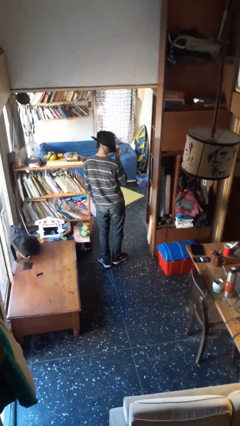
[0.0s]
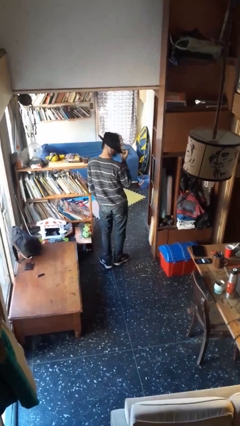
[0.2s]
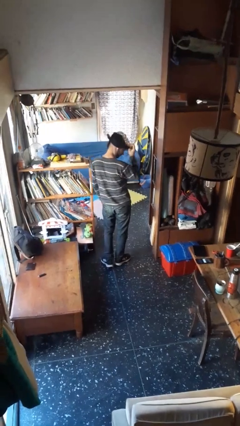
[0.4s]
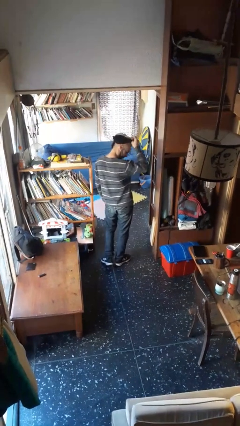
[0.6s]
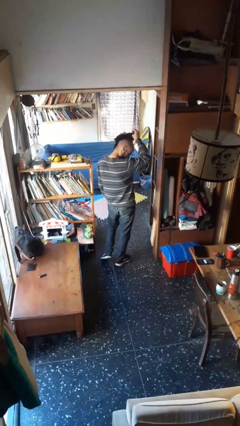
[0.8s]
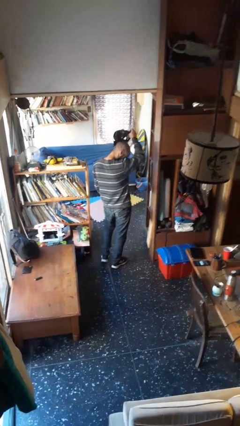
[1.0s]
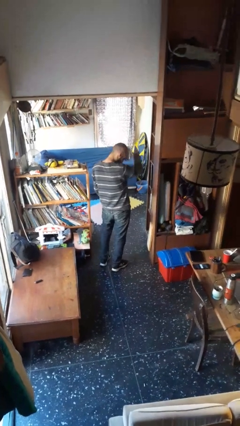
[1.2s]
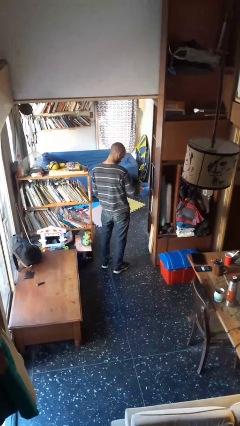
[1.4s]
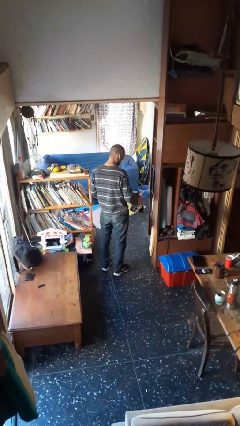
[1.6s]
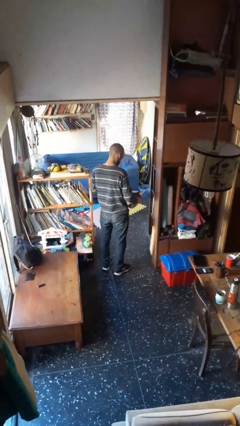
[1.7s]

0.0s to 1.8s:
person takes off facemask

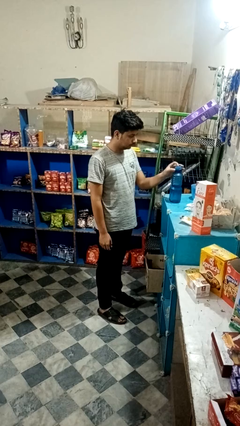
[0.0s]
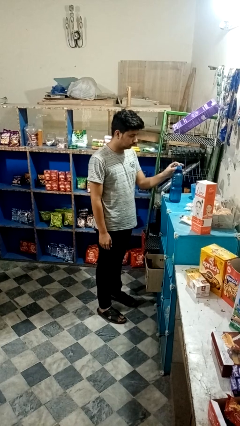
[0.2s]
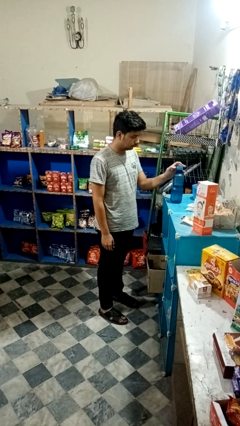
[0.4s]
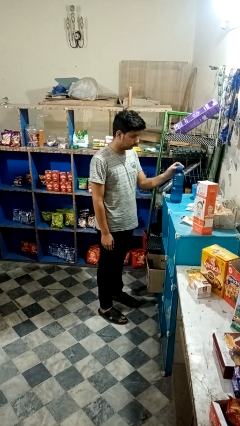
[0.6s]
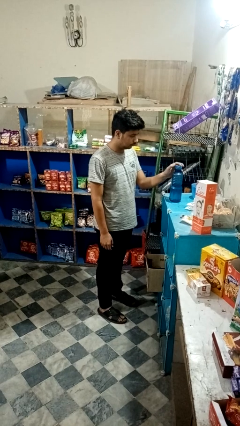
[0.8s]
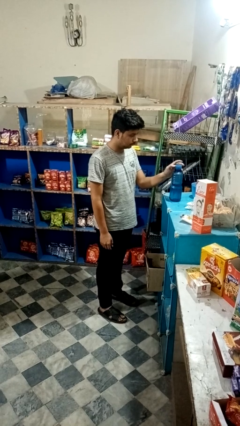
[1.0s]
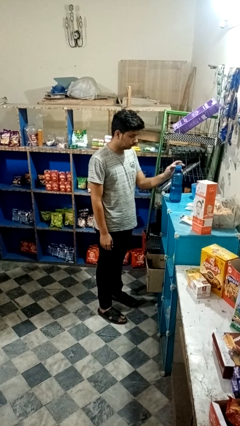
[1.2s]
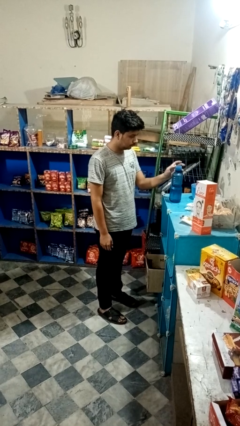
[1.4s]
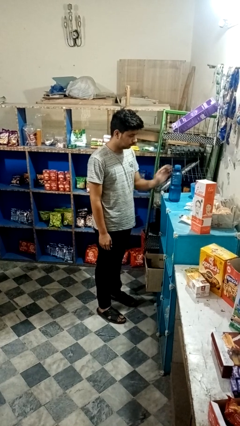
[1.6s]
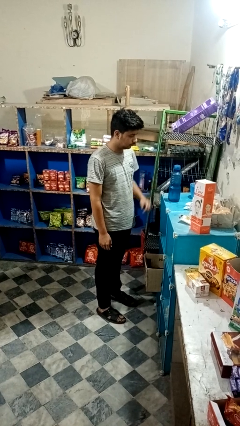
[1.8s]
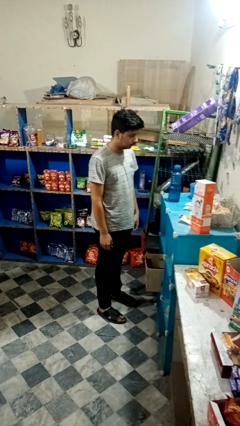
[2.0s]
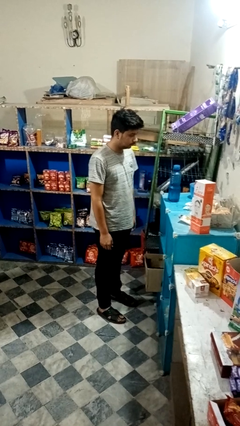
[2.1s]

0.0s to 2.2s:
person screws lid to bottle

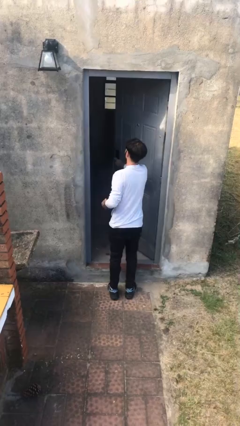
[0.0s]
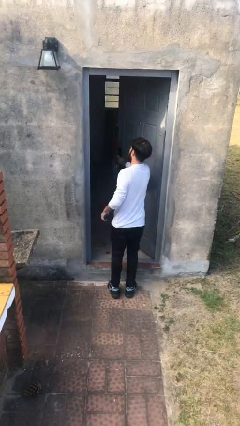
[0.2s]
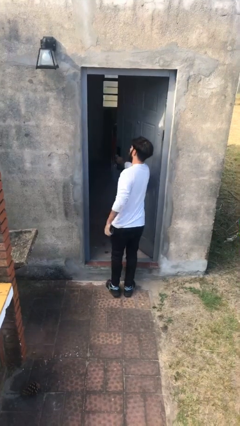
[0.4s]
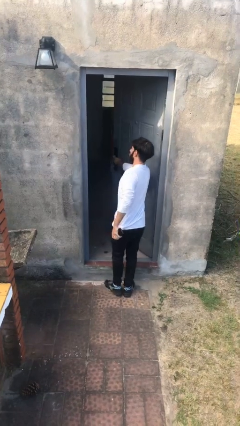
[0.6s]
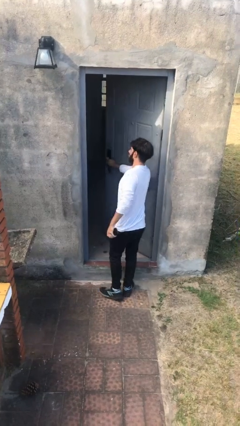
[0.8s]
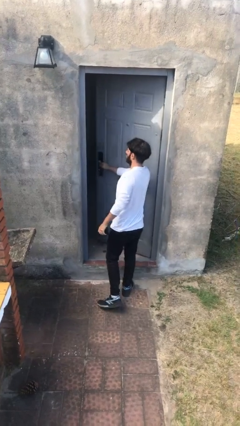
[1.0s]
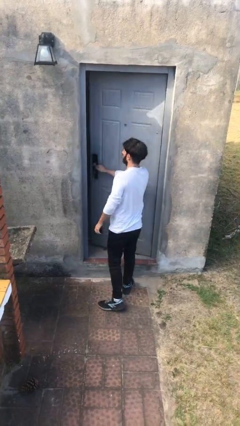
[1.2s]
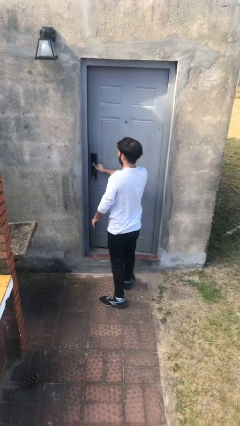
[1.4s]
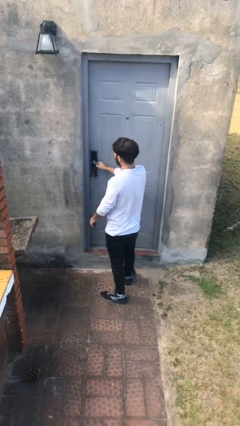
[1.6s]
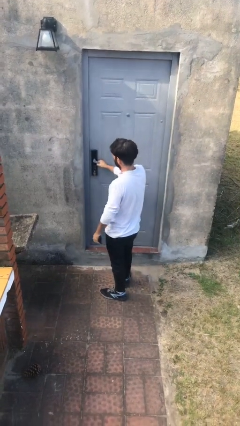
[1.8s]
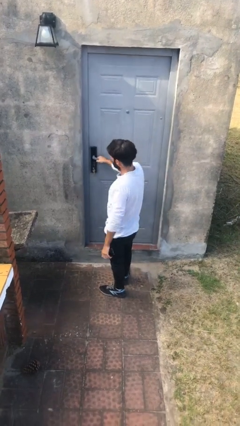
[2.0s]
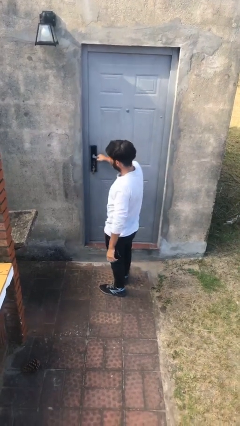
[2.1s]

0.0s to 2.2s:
person closes facility door

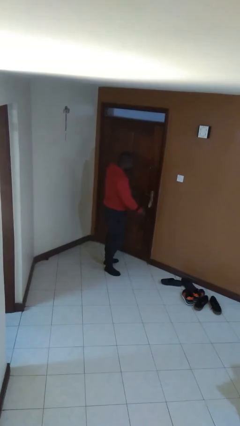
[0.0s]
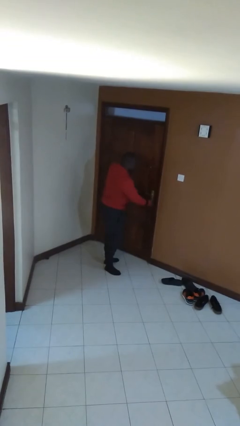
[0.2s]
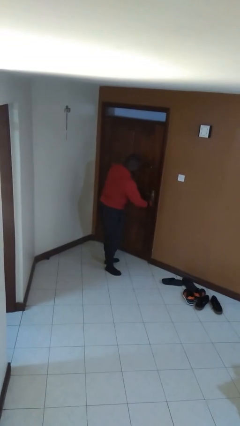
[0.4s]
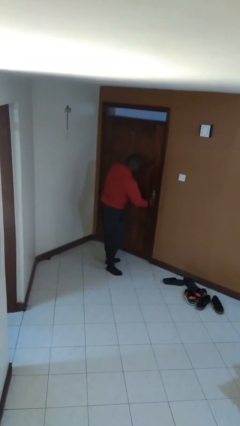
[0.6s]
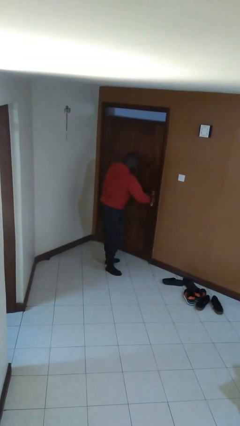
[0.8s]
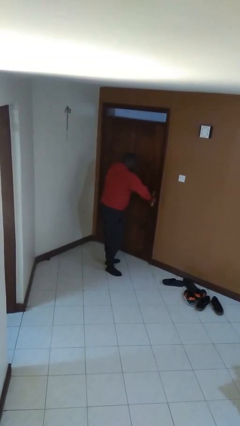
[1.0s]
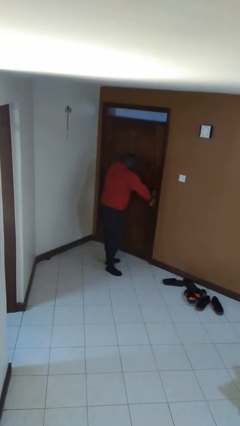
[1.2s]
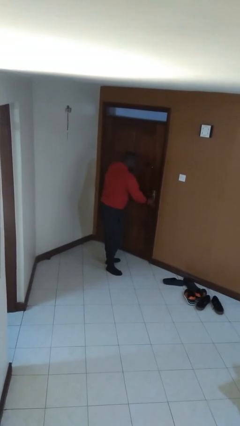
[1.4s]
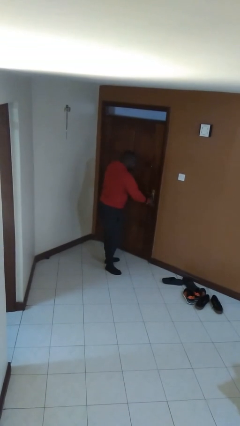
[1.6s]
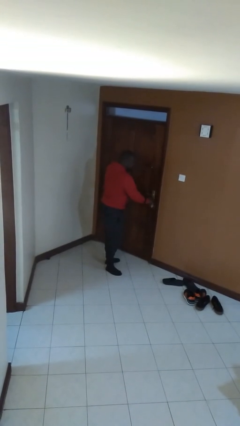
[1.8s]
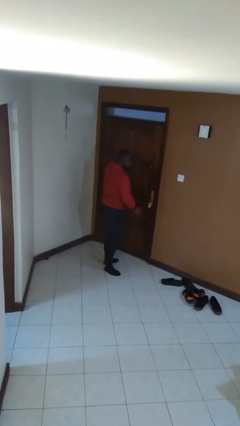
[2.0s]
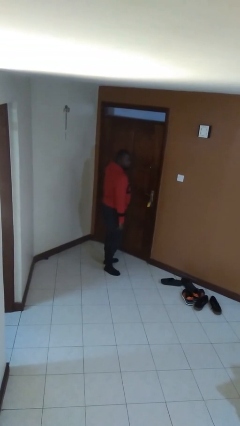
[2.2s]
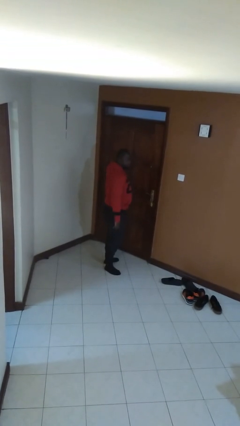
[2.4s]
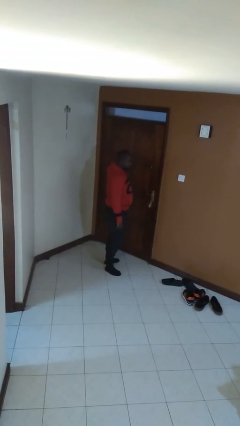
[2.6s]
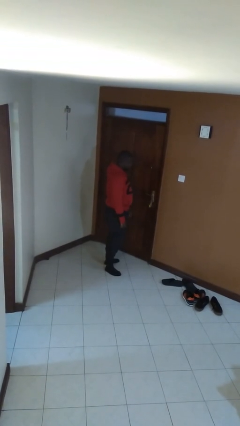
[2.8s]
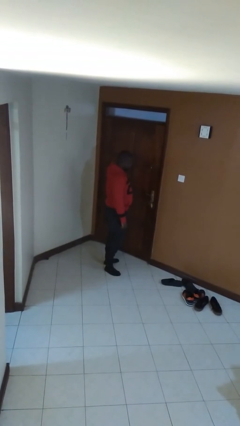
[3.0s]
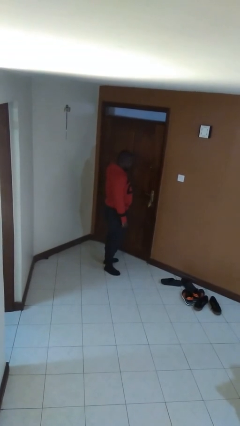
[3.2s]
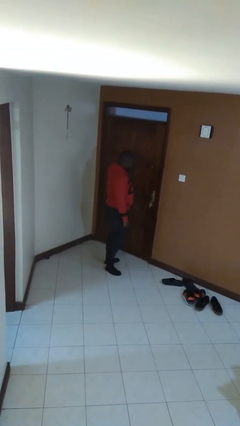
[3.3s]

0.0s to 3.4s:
person unlocks door with keys

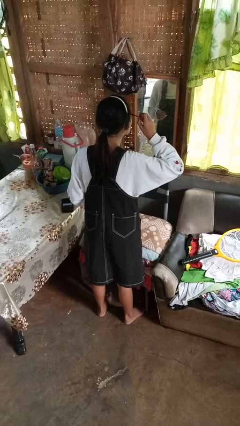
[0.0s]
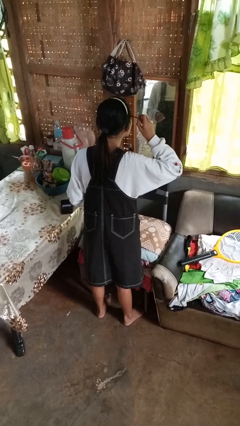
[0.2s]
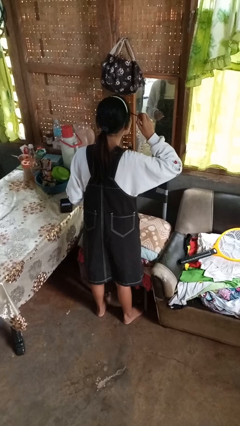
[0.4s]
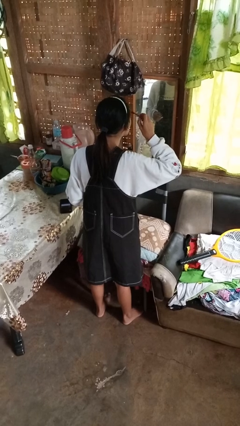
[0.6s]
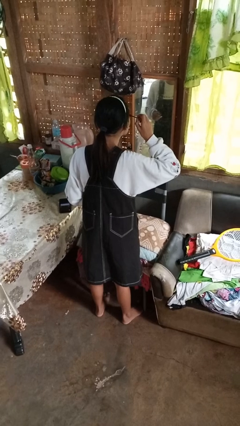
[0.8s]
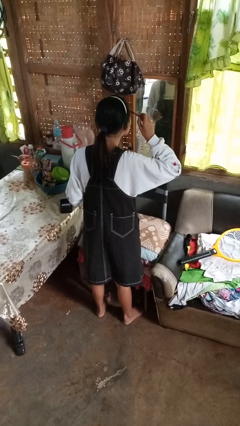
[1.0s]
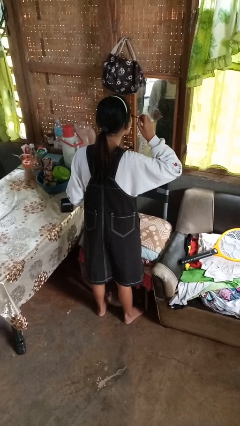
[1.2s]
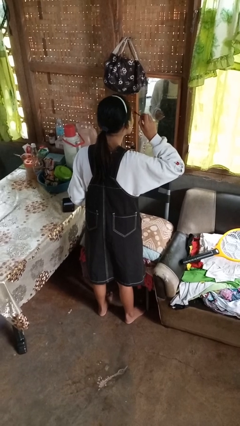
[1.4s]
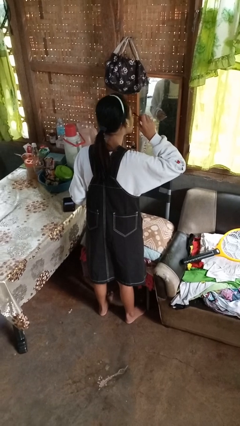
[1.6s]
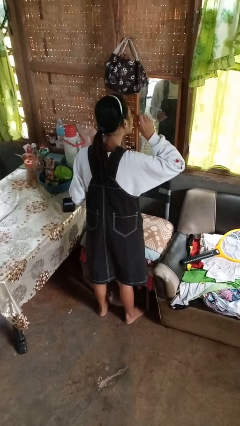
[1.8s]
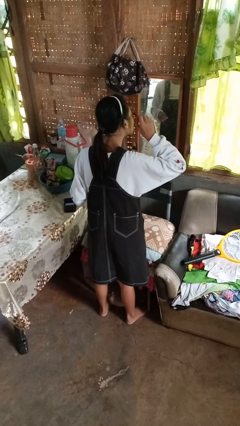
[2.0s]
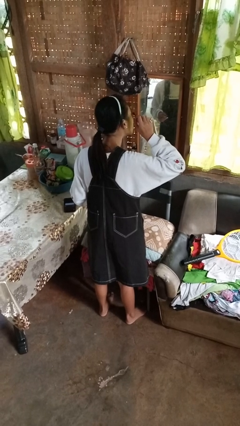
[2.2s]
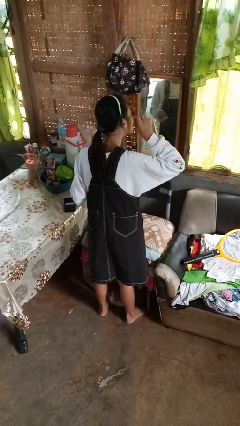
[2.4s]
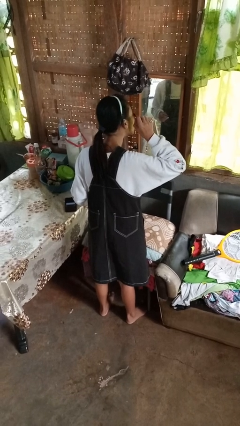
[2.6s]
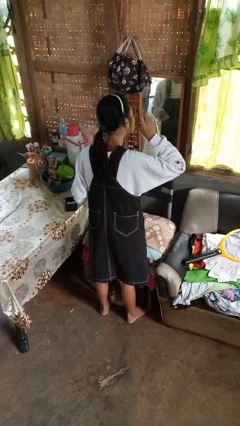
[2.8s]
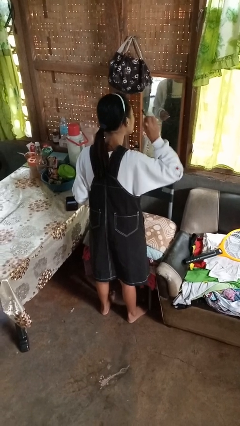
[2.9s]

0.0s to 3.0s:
person applies eye makeup

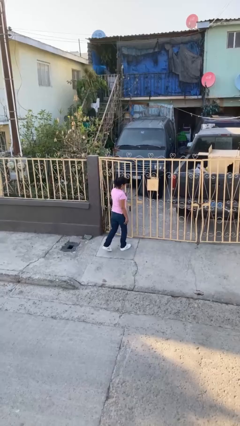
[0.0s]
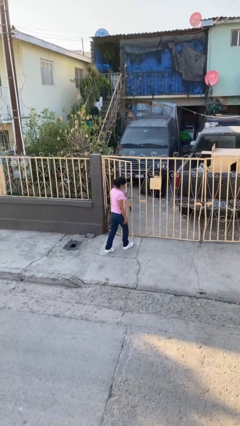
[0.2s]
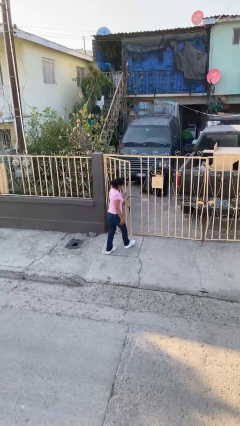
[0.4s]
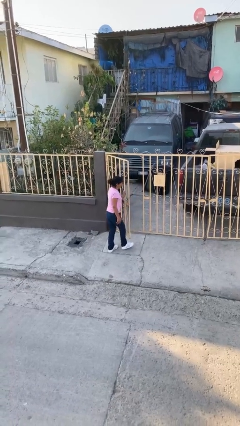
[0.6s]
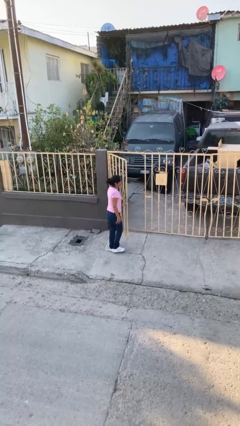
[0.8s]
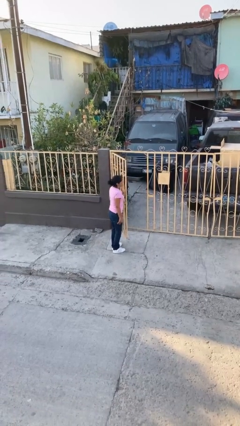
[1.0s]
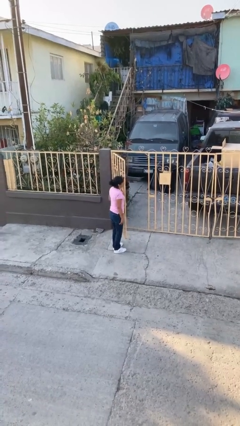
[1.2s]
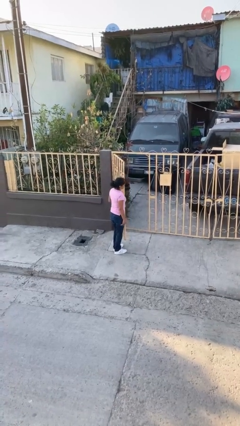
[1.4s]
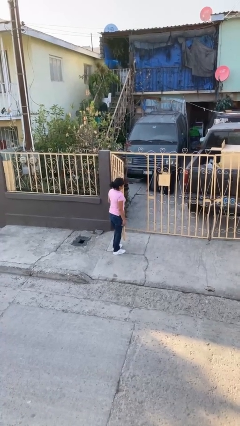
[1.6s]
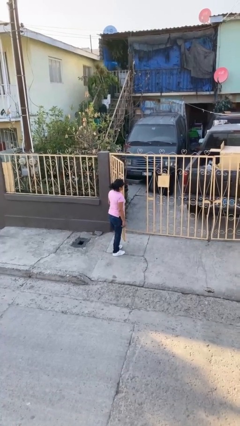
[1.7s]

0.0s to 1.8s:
person opens facility door

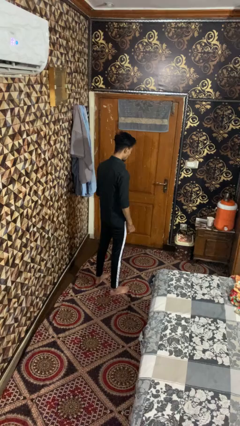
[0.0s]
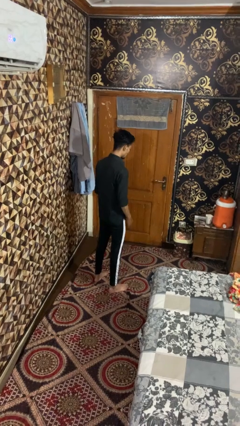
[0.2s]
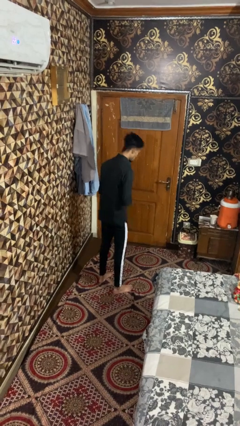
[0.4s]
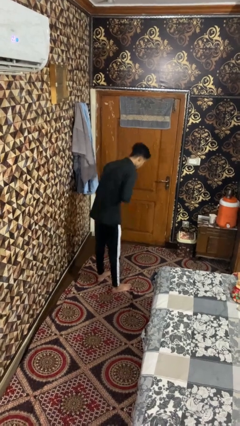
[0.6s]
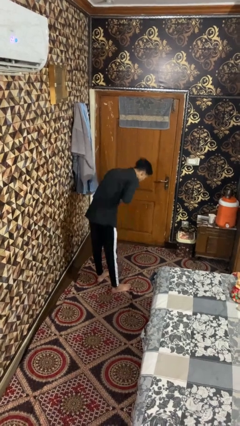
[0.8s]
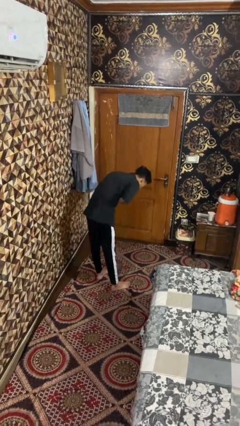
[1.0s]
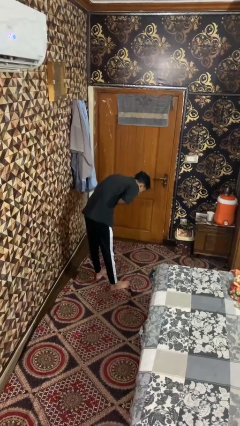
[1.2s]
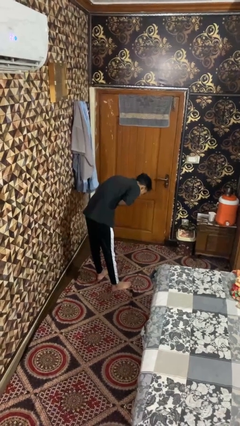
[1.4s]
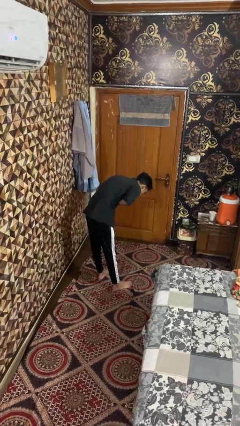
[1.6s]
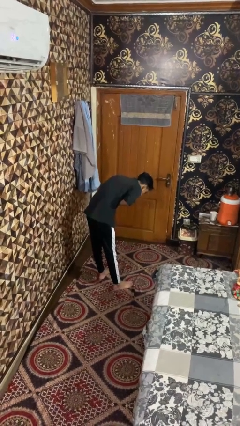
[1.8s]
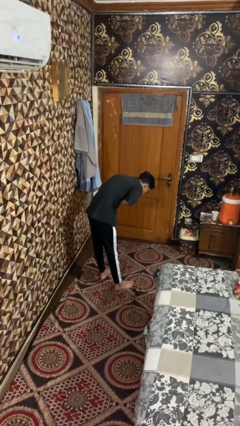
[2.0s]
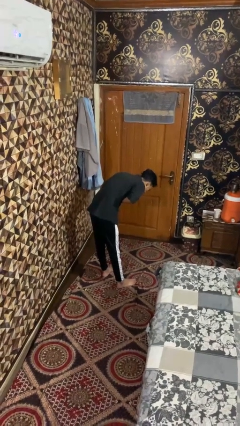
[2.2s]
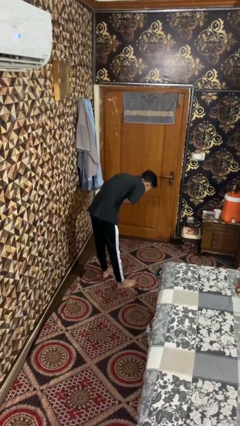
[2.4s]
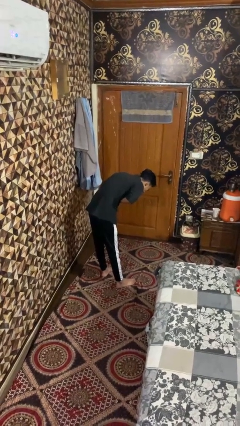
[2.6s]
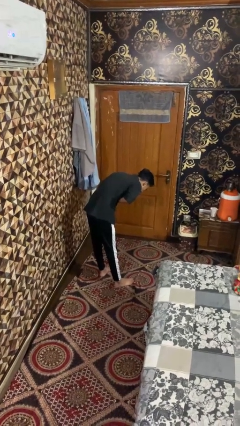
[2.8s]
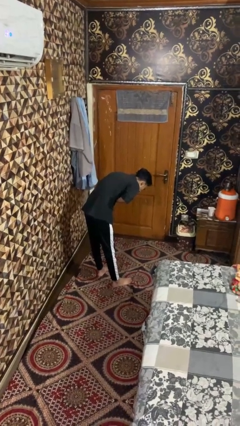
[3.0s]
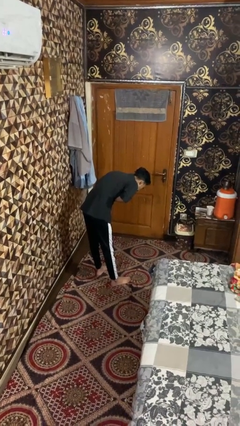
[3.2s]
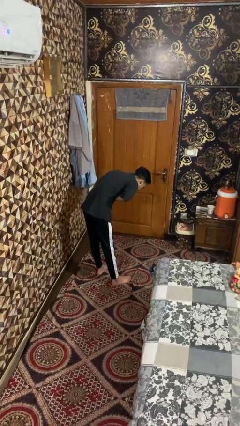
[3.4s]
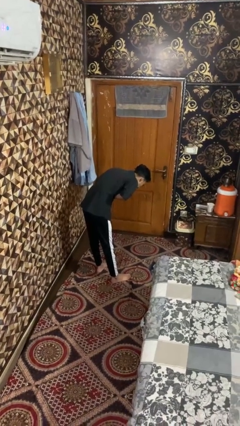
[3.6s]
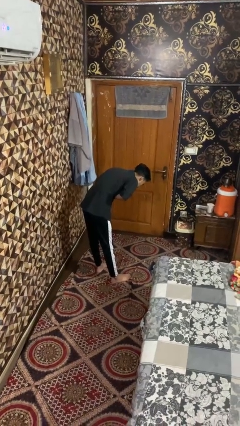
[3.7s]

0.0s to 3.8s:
person bows
